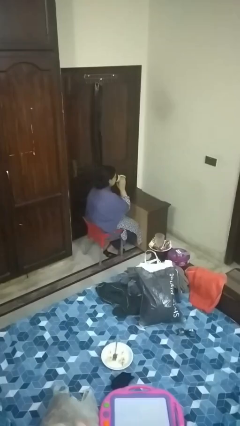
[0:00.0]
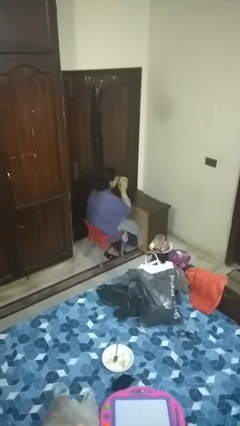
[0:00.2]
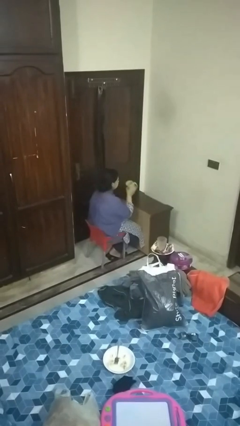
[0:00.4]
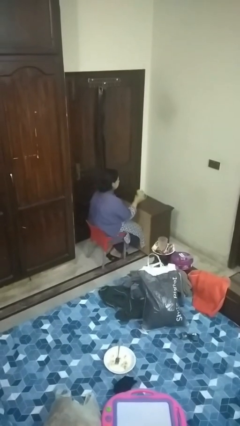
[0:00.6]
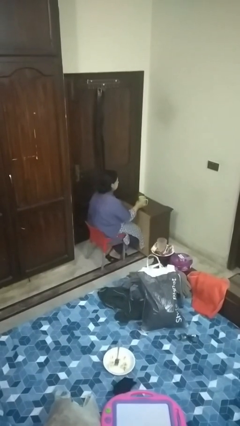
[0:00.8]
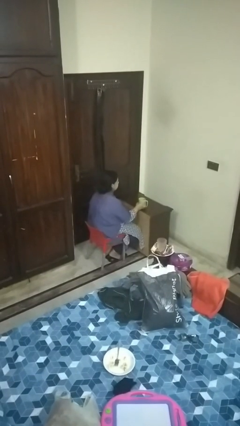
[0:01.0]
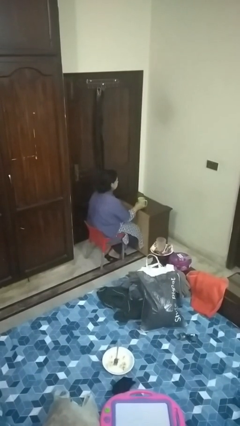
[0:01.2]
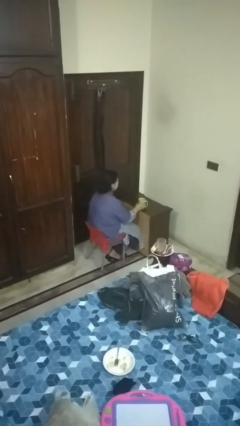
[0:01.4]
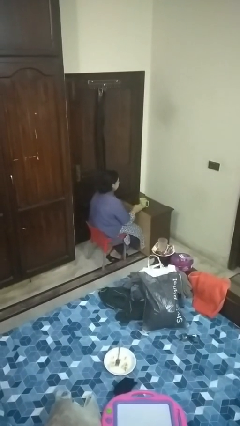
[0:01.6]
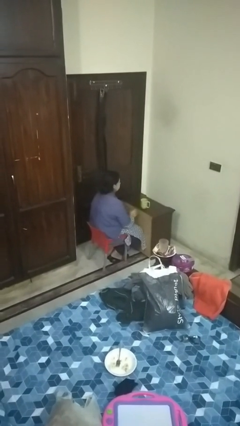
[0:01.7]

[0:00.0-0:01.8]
person puts down object on table

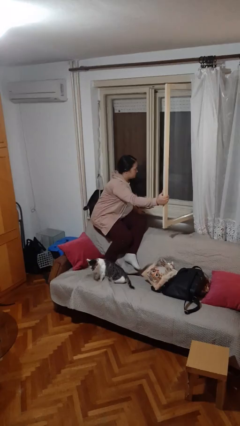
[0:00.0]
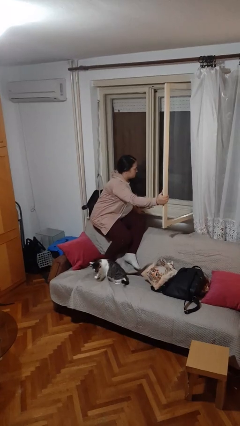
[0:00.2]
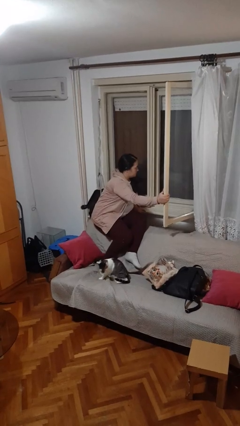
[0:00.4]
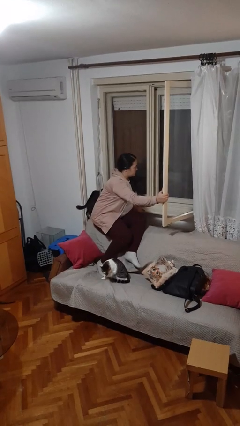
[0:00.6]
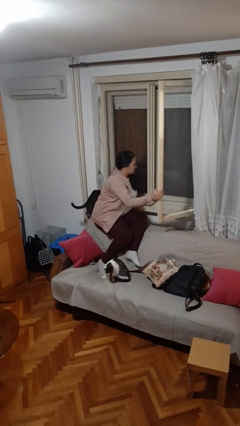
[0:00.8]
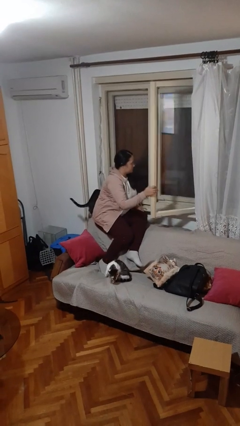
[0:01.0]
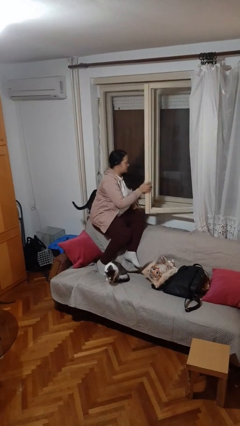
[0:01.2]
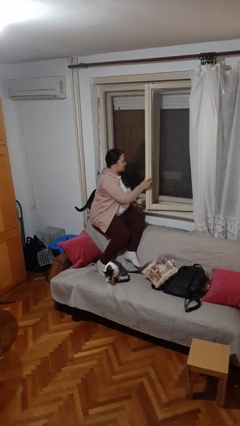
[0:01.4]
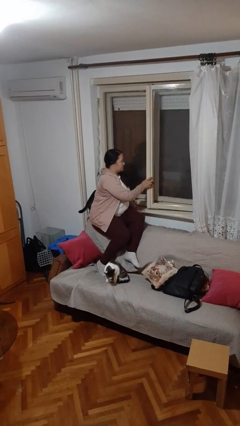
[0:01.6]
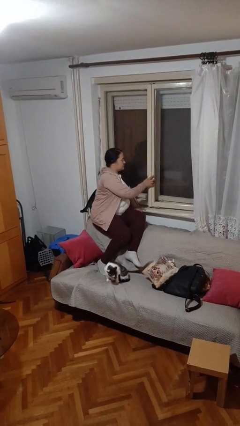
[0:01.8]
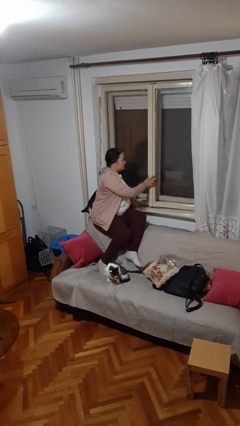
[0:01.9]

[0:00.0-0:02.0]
person closes home window

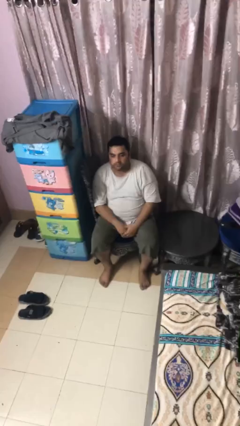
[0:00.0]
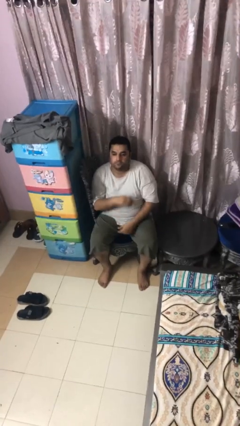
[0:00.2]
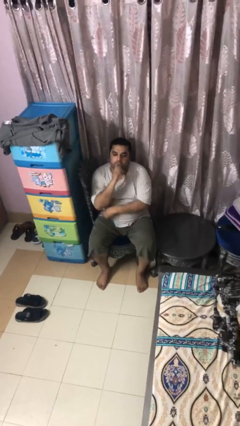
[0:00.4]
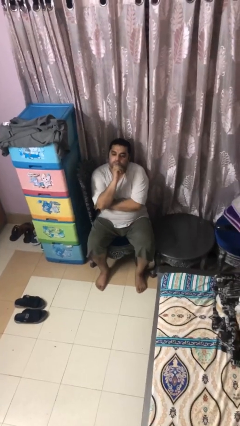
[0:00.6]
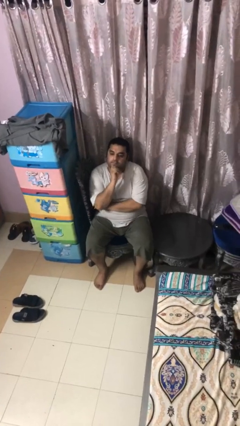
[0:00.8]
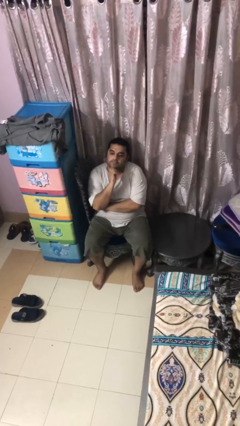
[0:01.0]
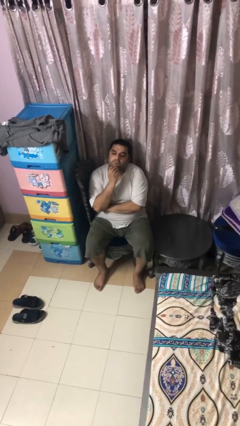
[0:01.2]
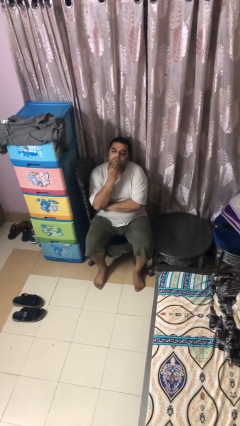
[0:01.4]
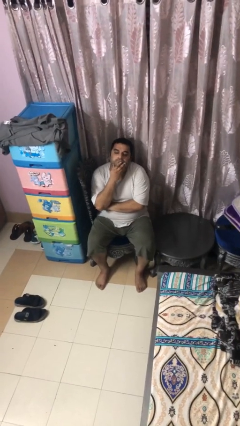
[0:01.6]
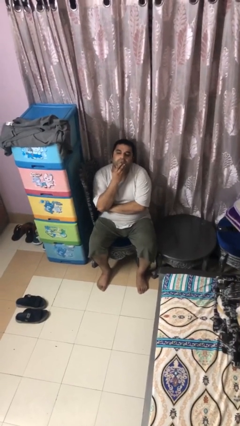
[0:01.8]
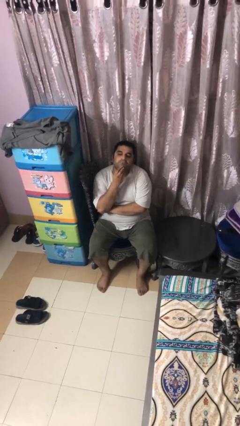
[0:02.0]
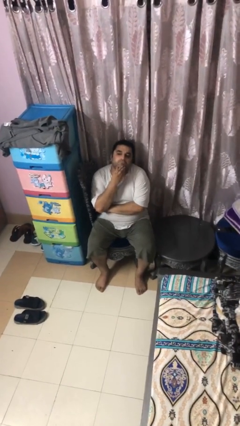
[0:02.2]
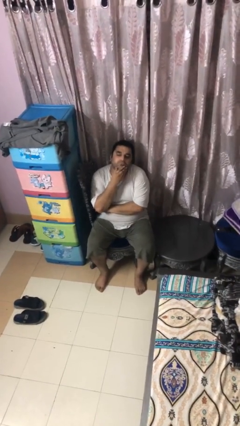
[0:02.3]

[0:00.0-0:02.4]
person strokes chin

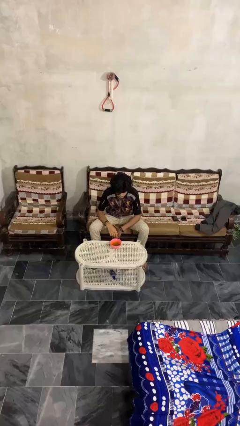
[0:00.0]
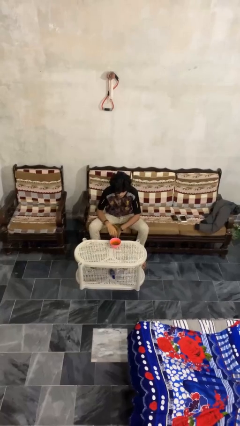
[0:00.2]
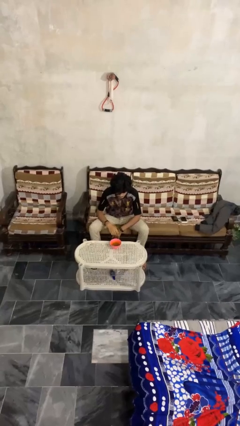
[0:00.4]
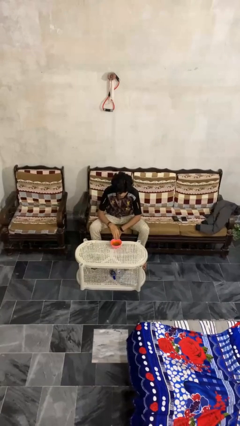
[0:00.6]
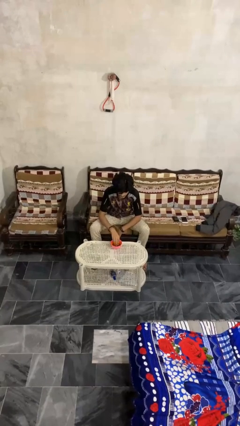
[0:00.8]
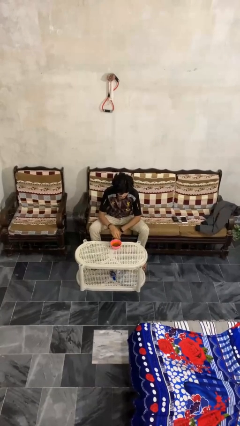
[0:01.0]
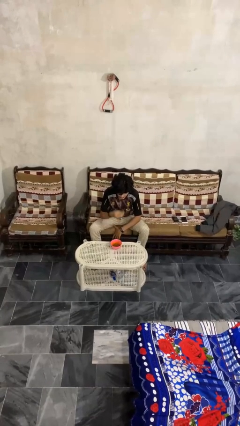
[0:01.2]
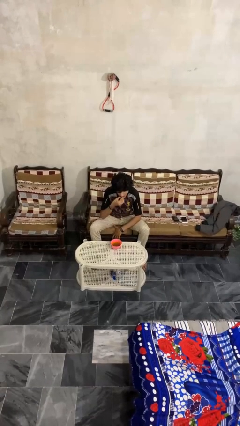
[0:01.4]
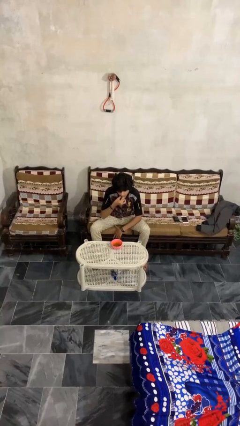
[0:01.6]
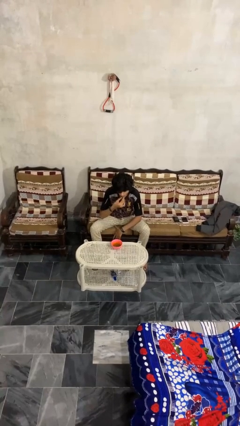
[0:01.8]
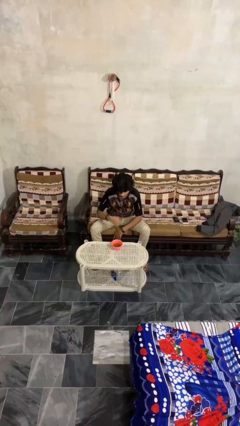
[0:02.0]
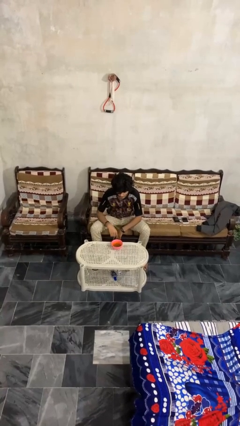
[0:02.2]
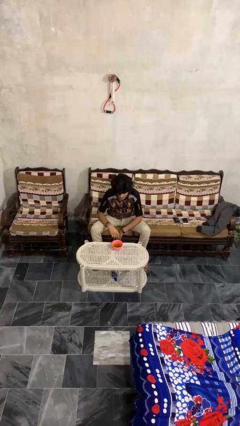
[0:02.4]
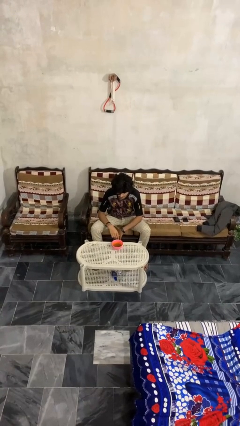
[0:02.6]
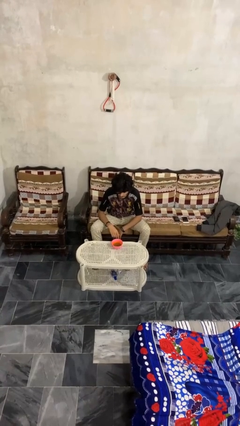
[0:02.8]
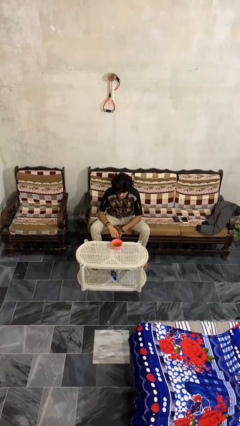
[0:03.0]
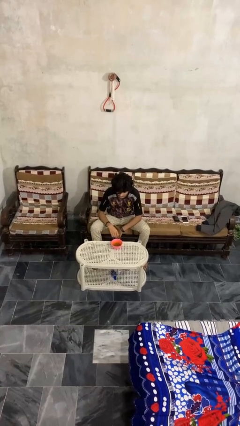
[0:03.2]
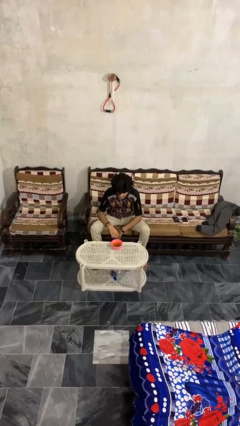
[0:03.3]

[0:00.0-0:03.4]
person eats with hands

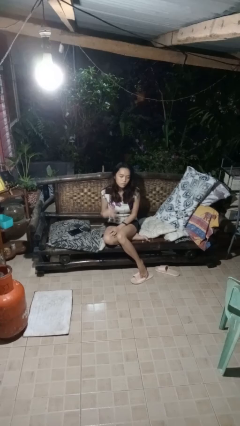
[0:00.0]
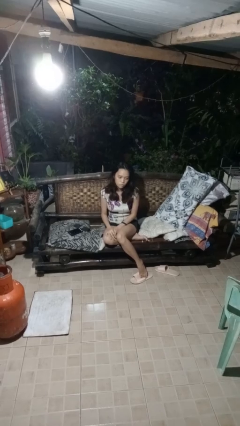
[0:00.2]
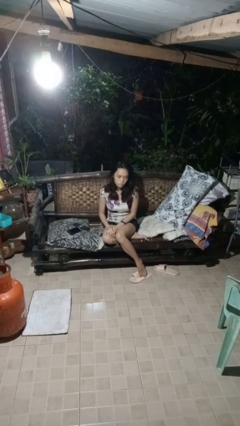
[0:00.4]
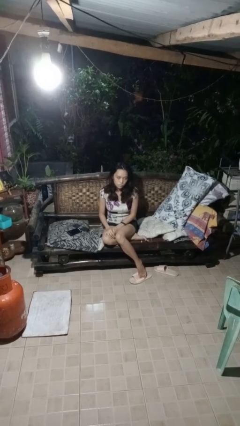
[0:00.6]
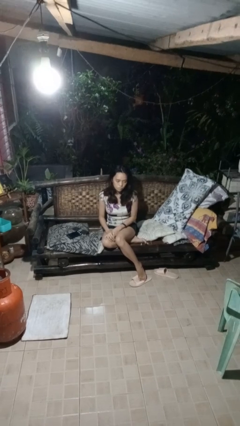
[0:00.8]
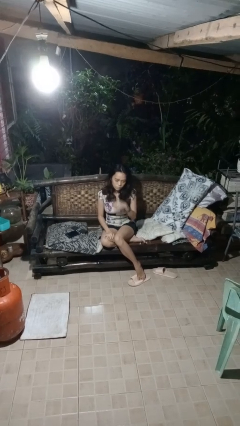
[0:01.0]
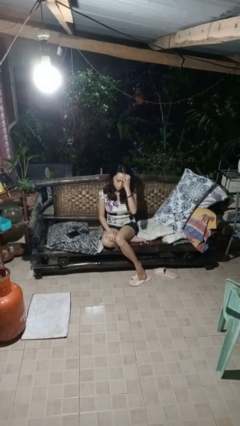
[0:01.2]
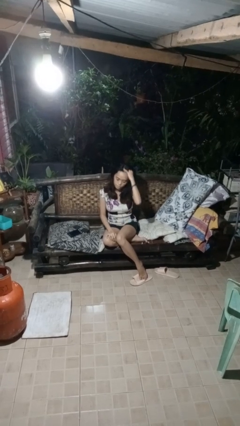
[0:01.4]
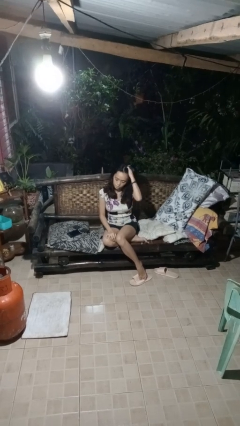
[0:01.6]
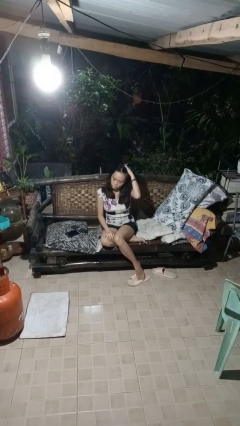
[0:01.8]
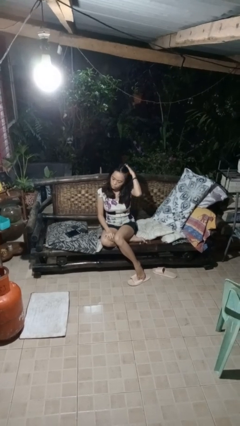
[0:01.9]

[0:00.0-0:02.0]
person searches in couch

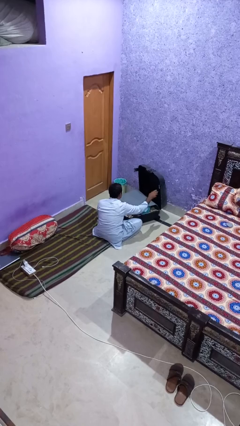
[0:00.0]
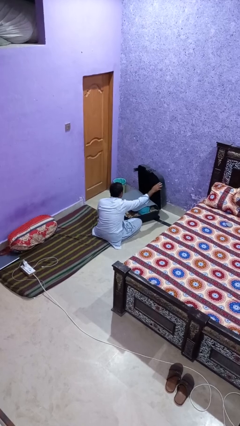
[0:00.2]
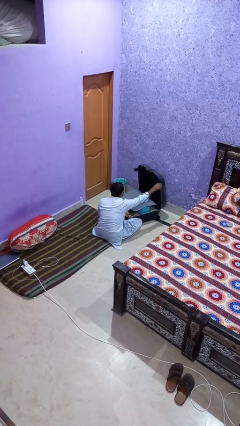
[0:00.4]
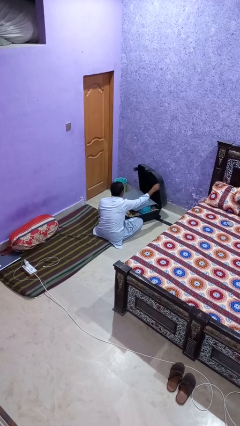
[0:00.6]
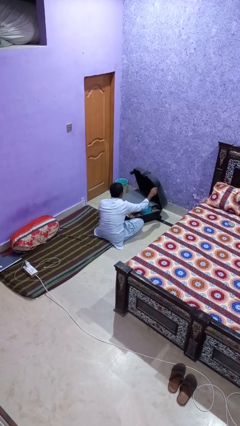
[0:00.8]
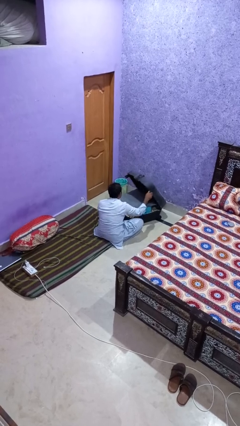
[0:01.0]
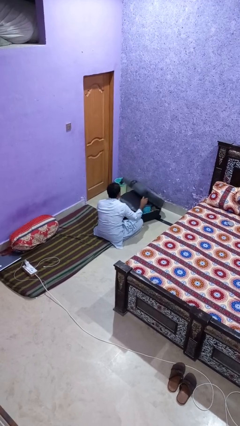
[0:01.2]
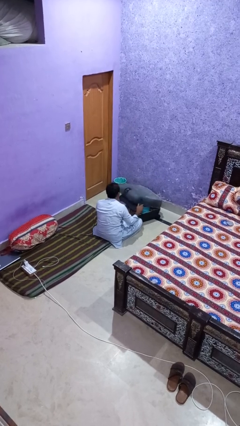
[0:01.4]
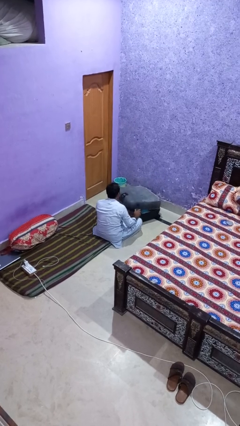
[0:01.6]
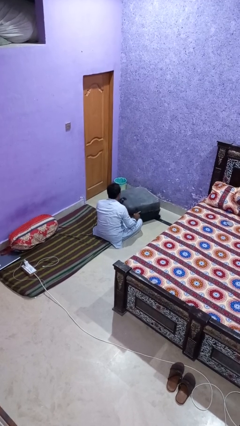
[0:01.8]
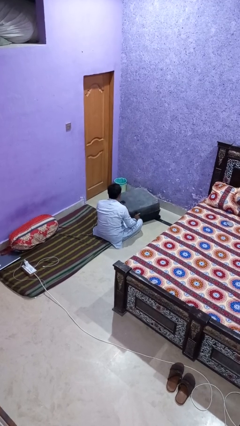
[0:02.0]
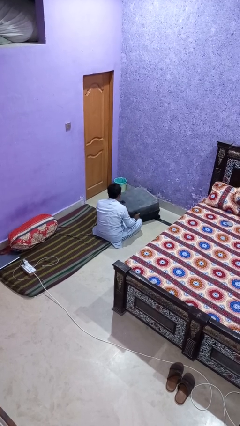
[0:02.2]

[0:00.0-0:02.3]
person closes suitcase

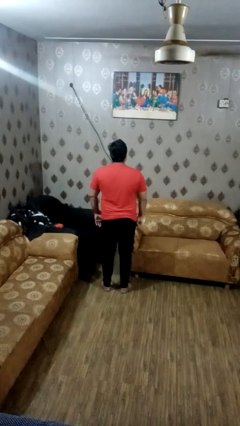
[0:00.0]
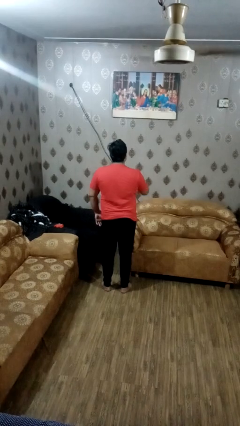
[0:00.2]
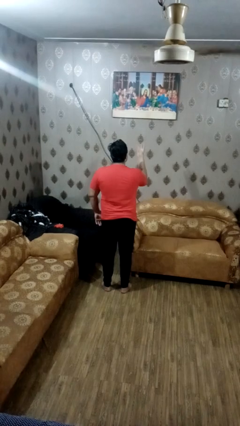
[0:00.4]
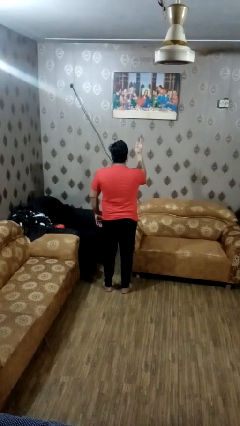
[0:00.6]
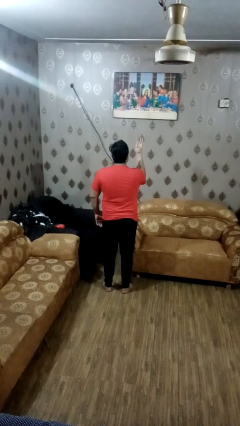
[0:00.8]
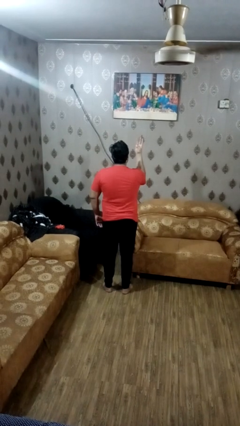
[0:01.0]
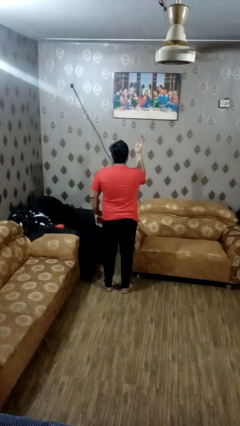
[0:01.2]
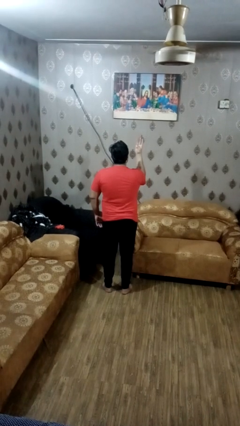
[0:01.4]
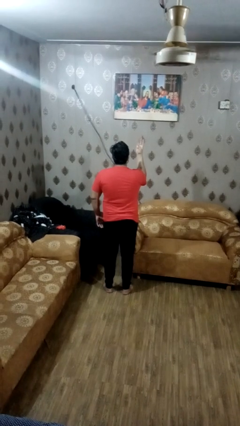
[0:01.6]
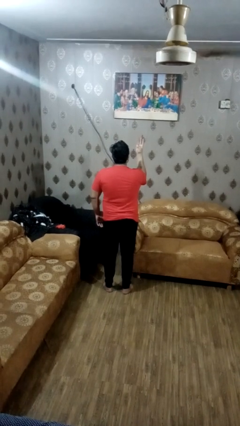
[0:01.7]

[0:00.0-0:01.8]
person gestures number three

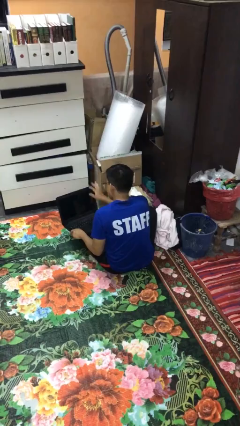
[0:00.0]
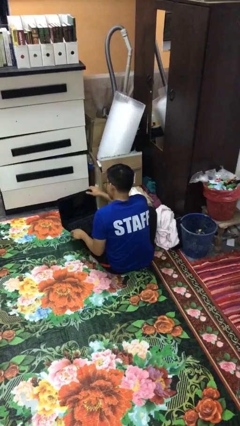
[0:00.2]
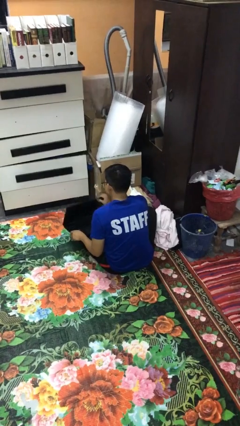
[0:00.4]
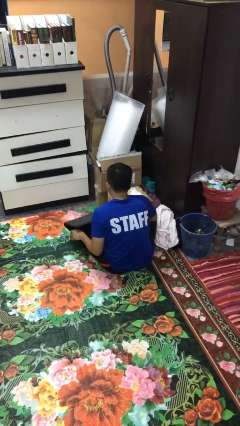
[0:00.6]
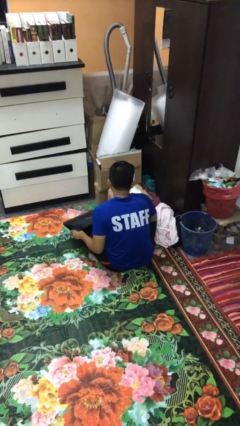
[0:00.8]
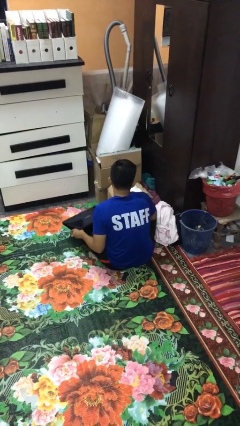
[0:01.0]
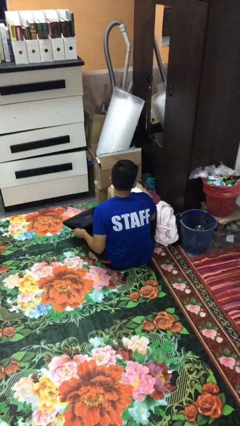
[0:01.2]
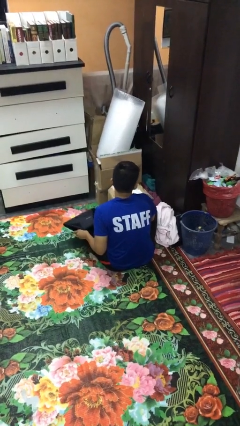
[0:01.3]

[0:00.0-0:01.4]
person closes laptop
